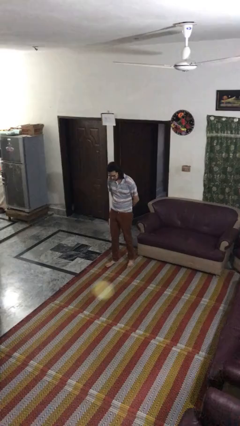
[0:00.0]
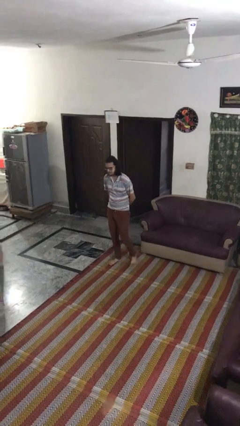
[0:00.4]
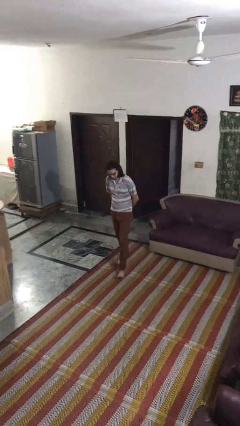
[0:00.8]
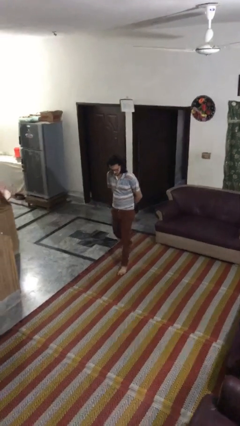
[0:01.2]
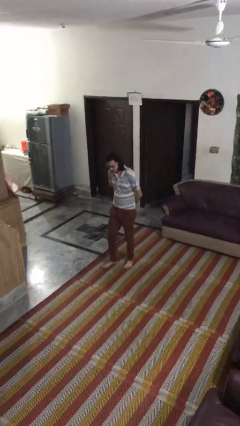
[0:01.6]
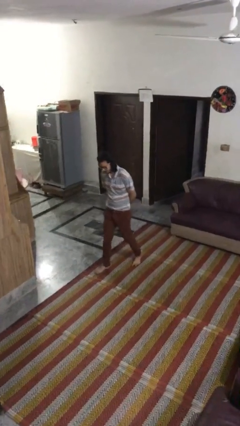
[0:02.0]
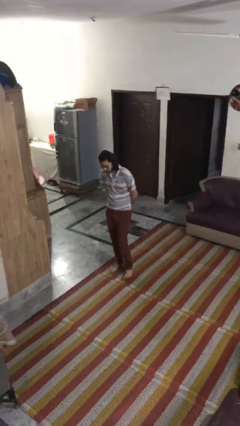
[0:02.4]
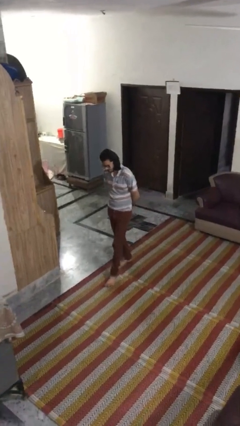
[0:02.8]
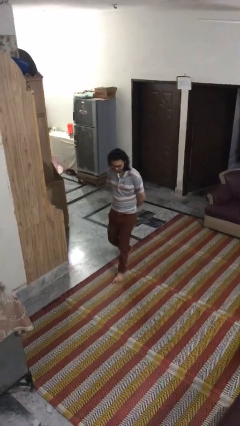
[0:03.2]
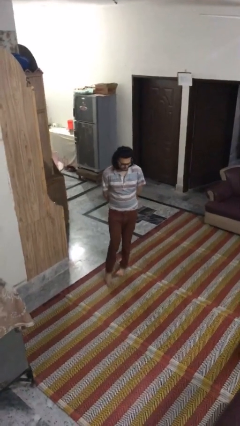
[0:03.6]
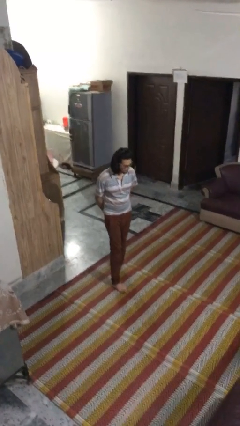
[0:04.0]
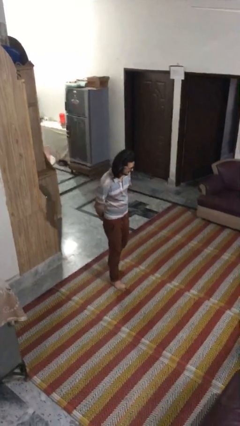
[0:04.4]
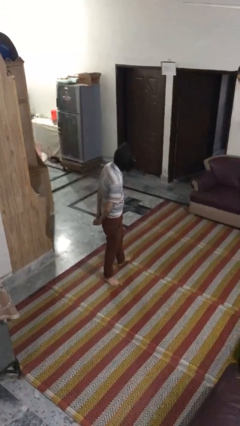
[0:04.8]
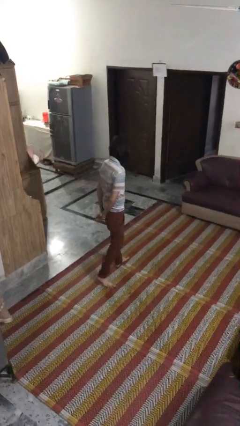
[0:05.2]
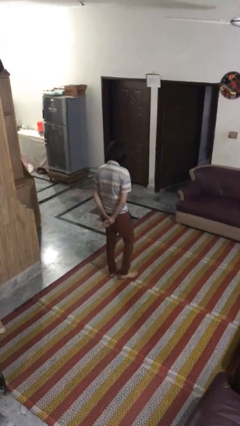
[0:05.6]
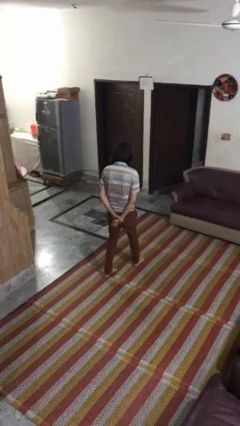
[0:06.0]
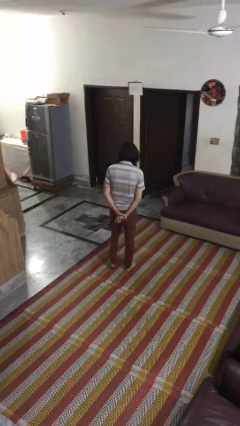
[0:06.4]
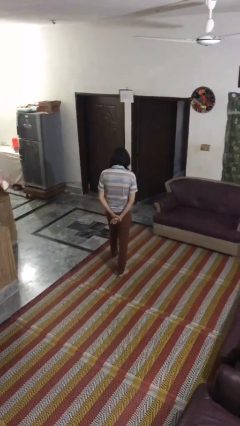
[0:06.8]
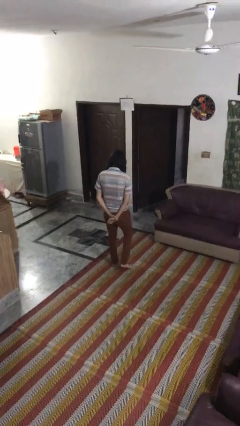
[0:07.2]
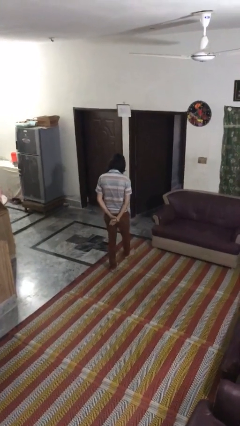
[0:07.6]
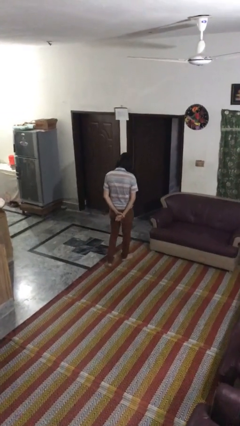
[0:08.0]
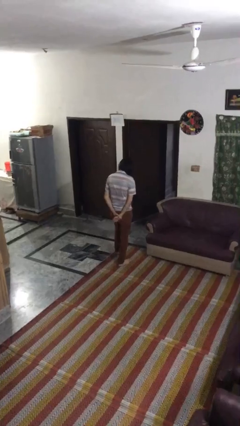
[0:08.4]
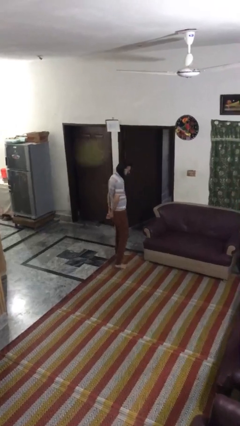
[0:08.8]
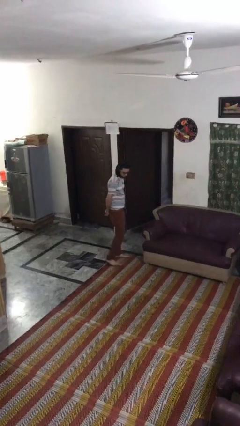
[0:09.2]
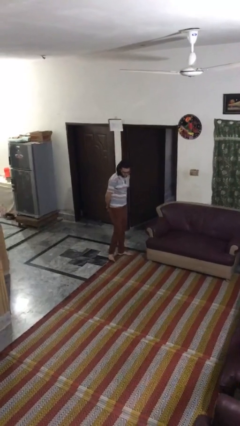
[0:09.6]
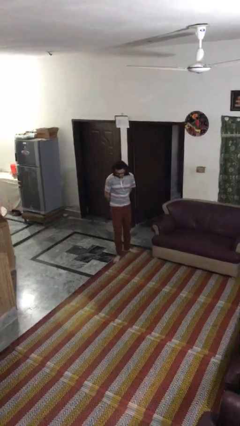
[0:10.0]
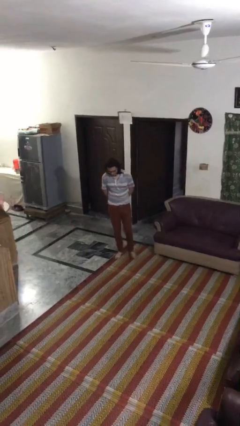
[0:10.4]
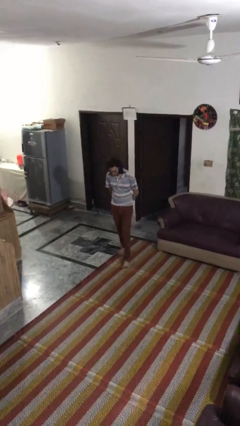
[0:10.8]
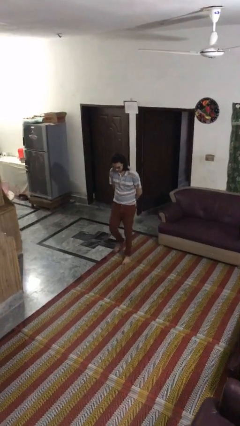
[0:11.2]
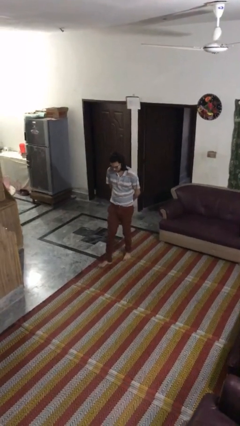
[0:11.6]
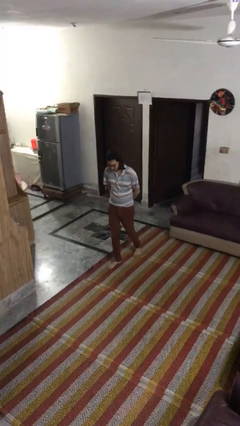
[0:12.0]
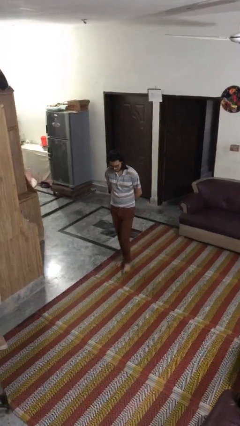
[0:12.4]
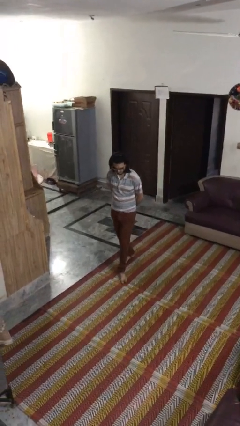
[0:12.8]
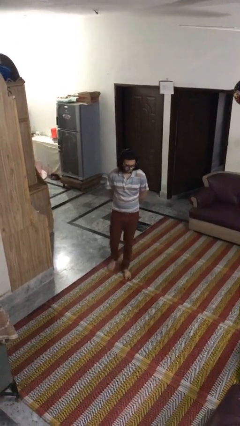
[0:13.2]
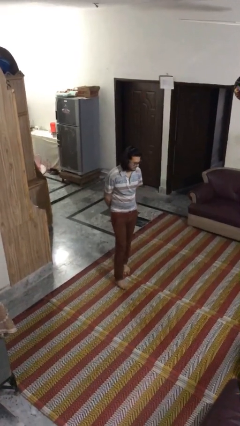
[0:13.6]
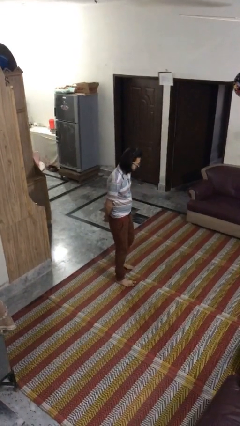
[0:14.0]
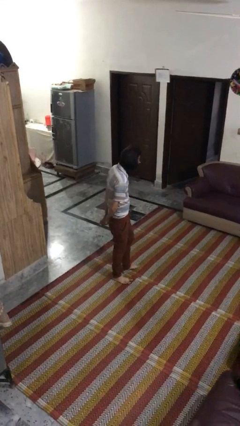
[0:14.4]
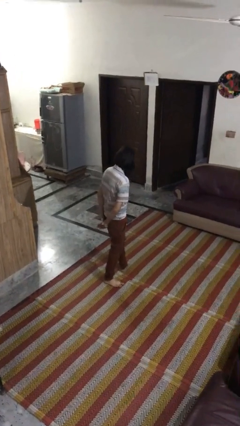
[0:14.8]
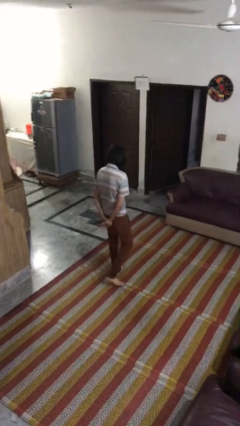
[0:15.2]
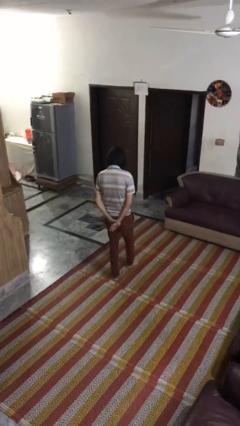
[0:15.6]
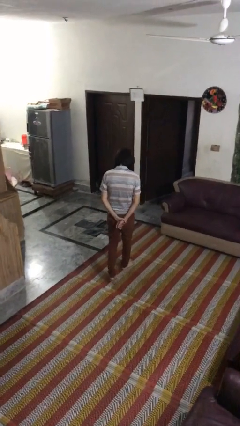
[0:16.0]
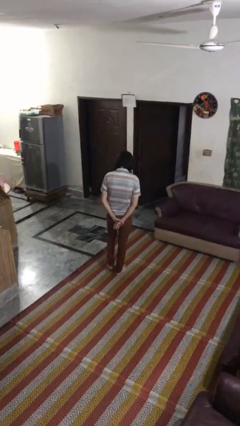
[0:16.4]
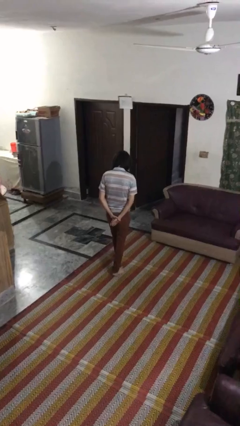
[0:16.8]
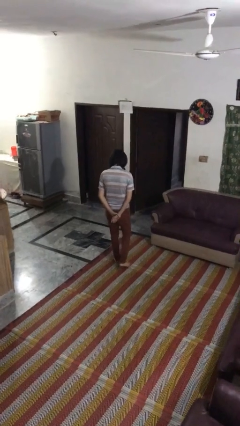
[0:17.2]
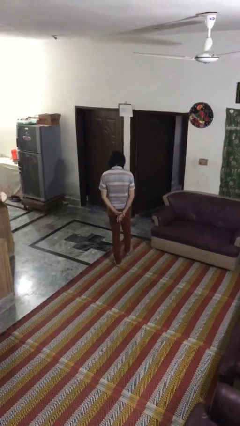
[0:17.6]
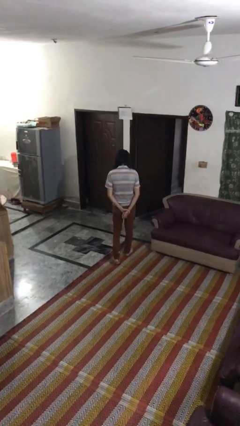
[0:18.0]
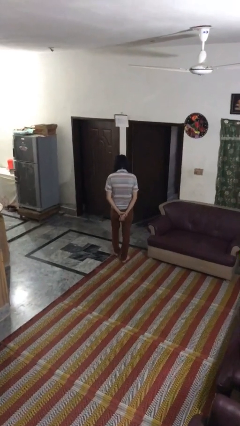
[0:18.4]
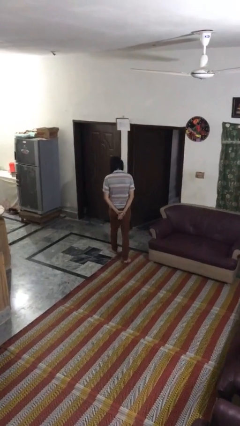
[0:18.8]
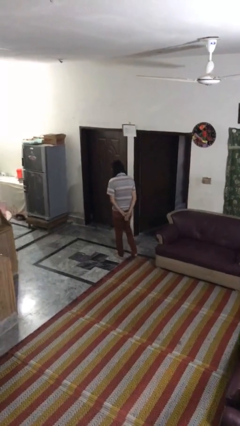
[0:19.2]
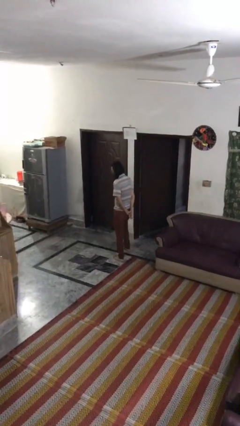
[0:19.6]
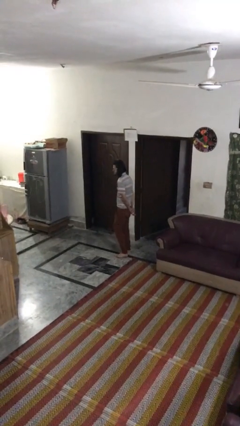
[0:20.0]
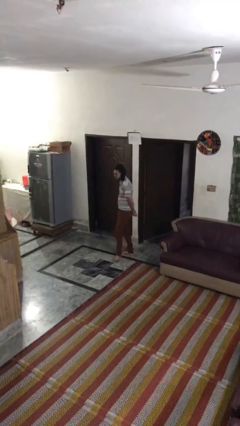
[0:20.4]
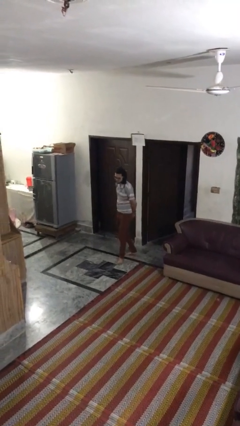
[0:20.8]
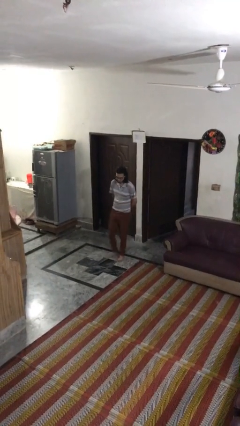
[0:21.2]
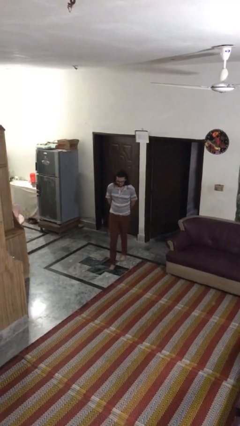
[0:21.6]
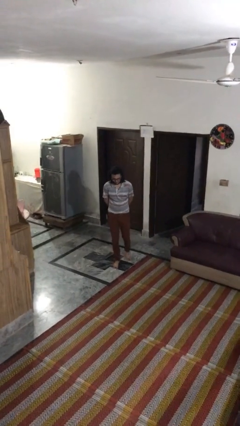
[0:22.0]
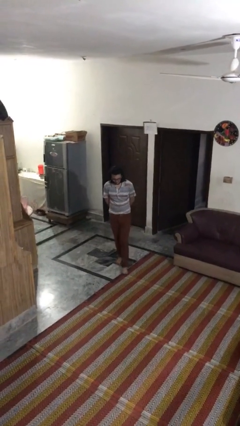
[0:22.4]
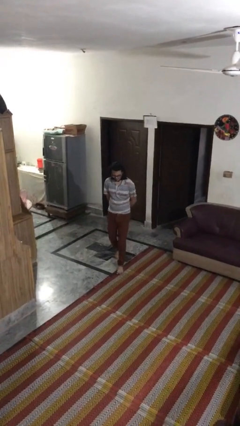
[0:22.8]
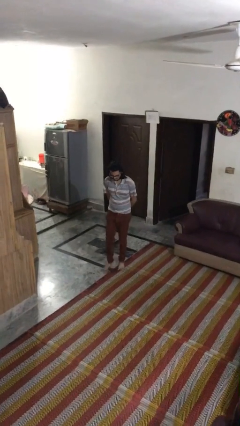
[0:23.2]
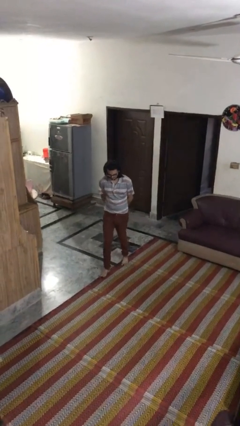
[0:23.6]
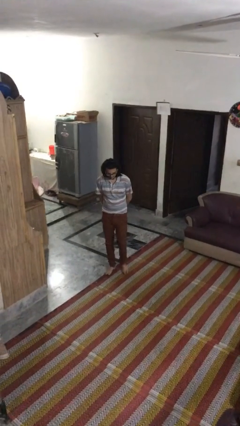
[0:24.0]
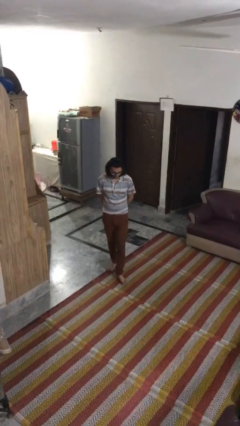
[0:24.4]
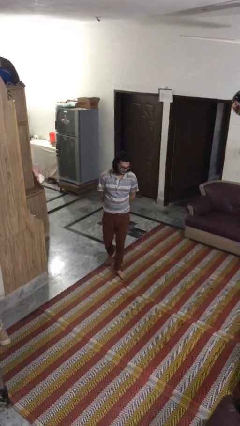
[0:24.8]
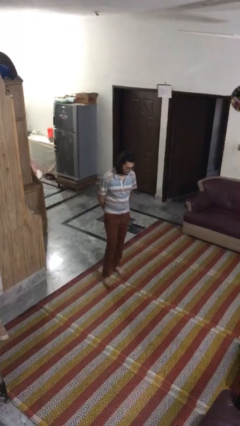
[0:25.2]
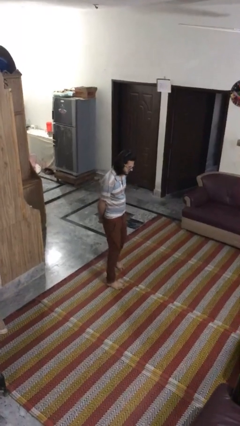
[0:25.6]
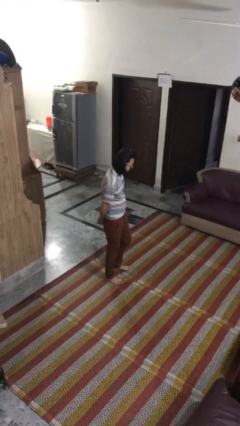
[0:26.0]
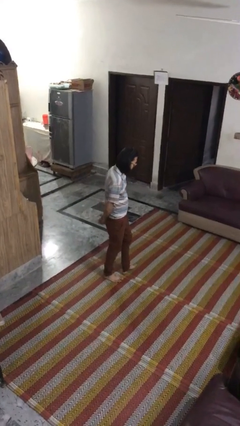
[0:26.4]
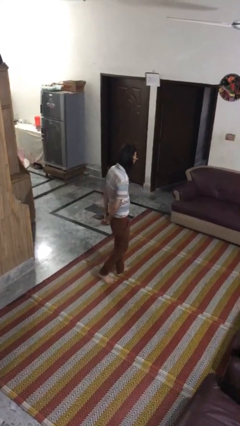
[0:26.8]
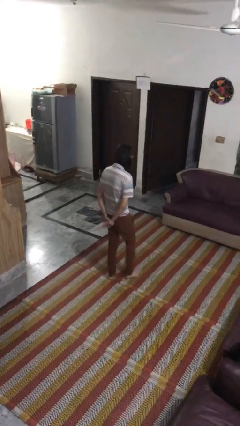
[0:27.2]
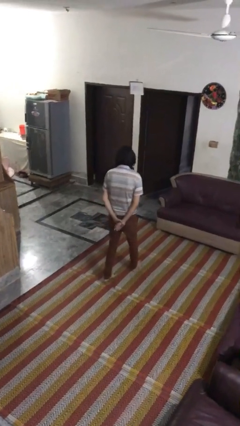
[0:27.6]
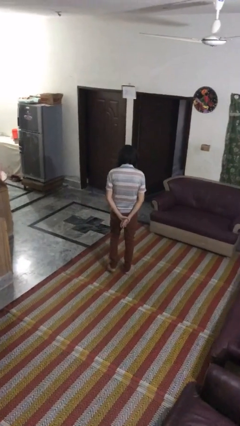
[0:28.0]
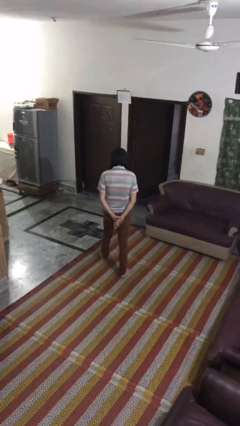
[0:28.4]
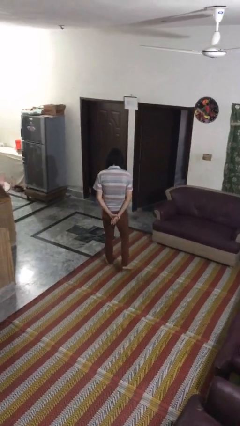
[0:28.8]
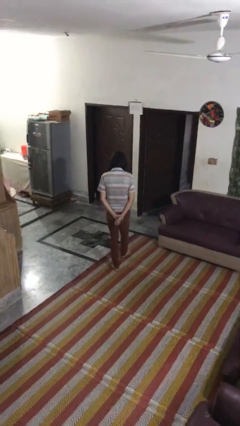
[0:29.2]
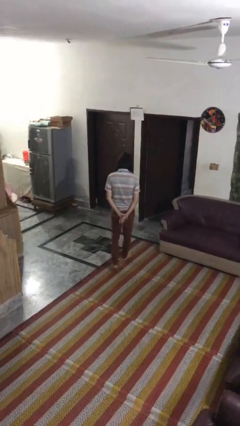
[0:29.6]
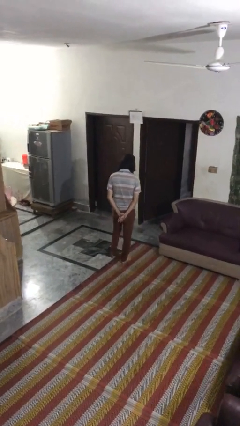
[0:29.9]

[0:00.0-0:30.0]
person walks

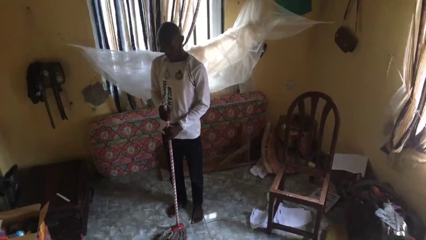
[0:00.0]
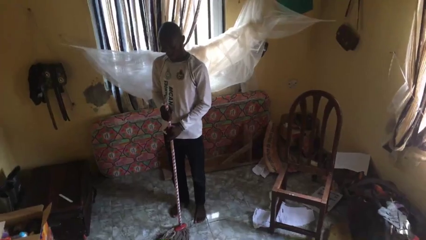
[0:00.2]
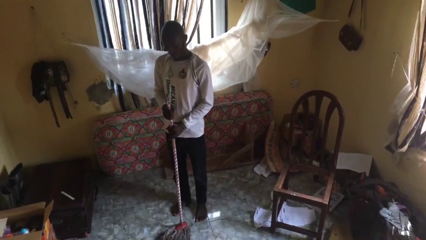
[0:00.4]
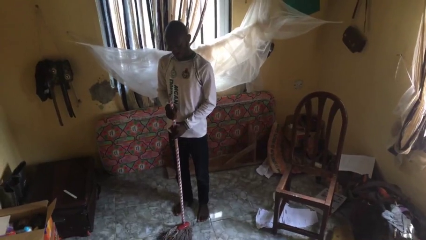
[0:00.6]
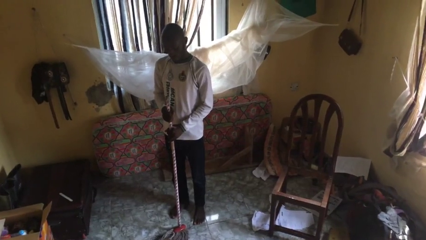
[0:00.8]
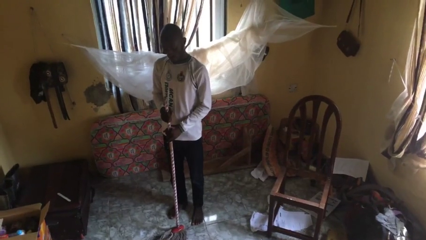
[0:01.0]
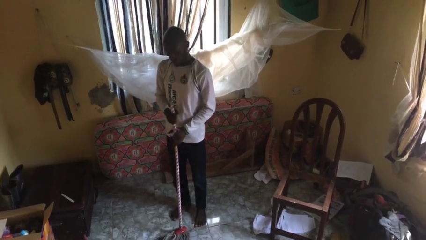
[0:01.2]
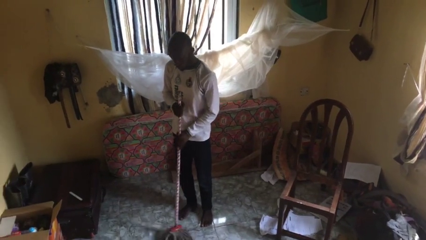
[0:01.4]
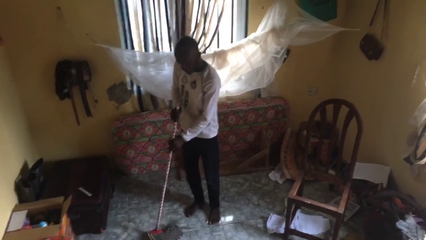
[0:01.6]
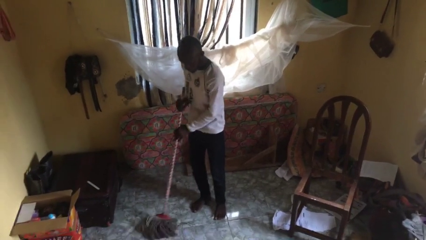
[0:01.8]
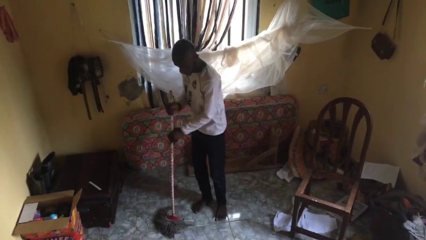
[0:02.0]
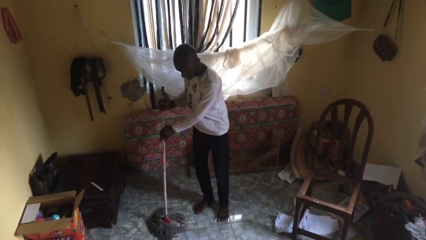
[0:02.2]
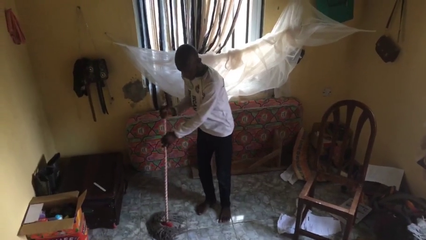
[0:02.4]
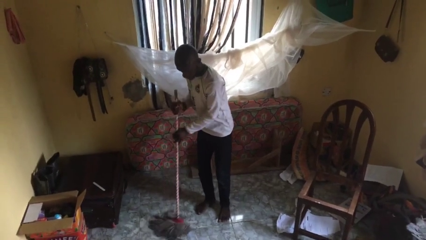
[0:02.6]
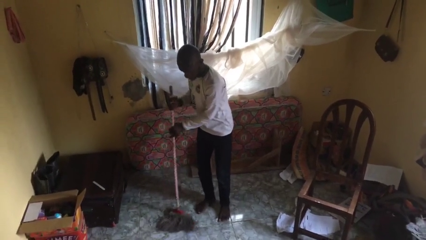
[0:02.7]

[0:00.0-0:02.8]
person mops

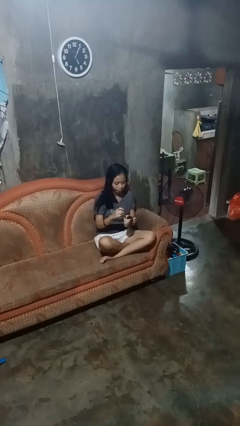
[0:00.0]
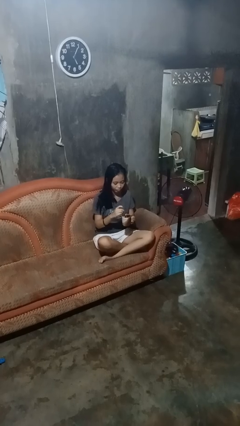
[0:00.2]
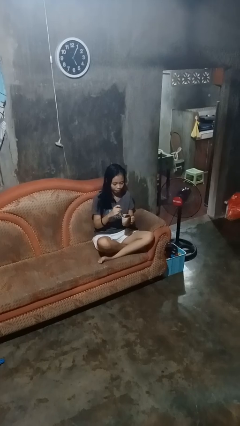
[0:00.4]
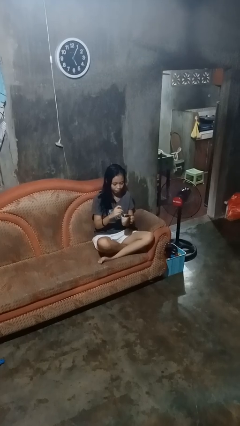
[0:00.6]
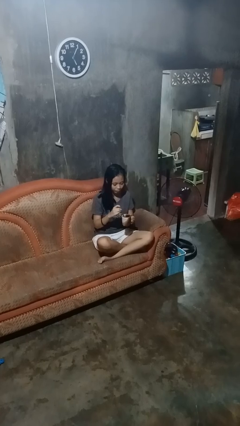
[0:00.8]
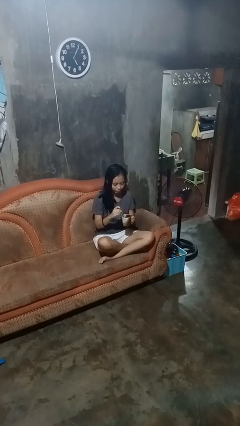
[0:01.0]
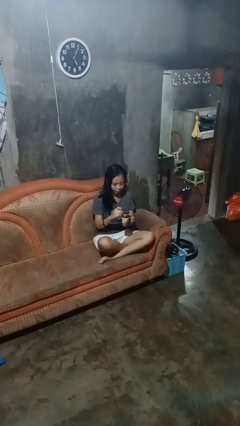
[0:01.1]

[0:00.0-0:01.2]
person stirs mug
